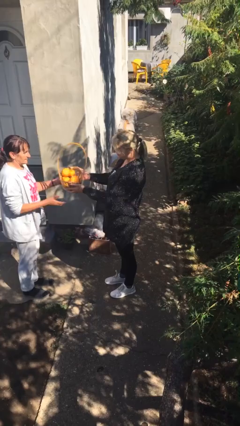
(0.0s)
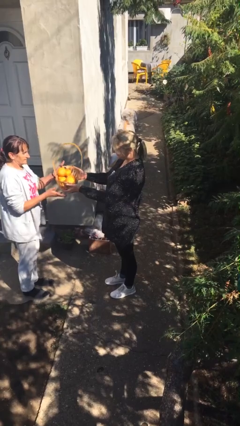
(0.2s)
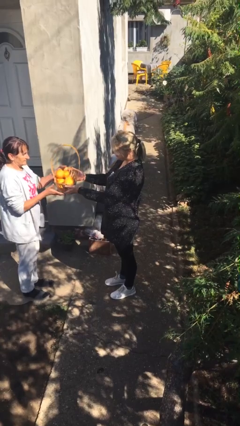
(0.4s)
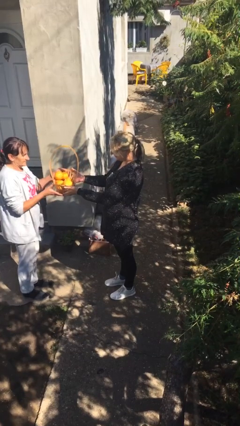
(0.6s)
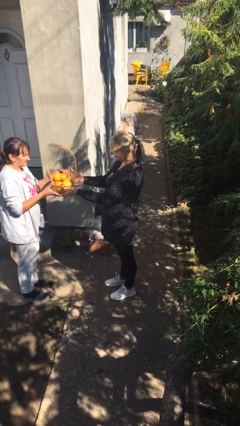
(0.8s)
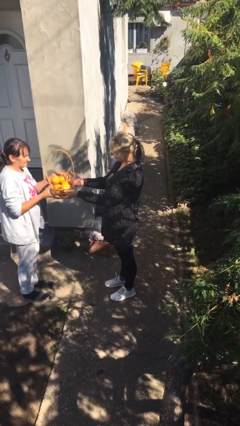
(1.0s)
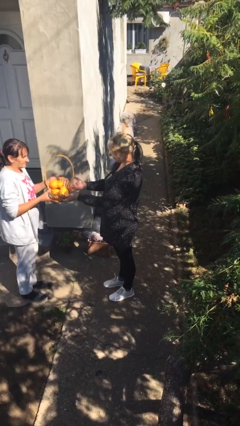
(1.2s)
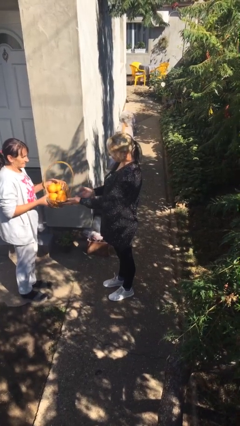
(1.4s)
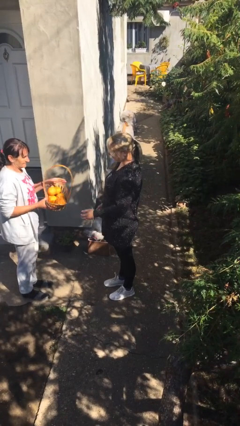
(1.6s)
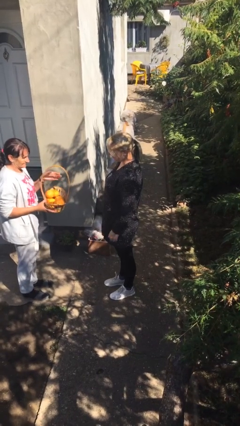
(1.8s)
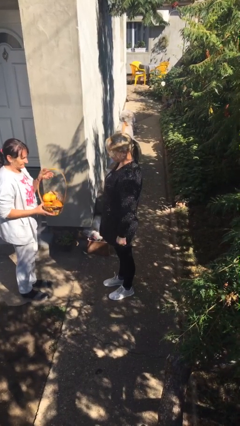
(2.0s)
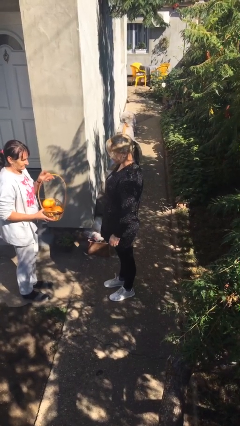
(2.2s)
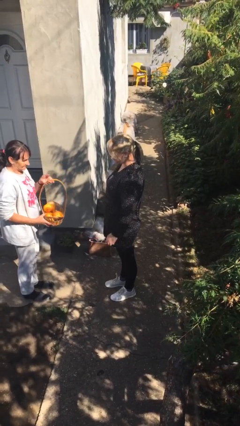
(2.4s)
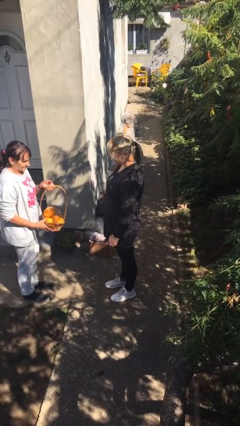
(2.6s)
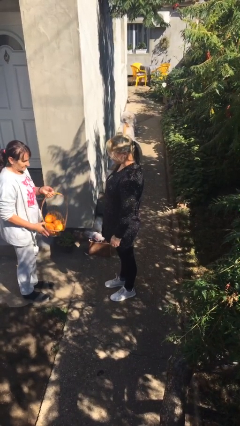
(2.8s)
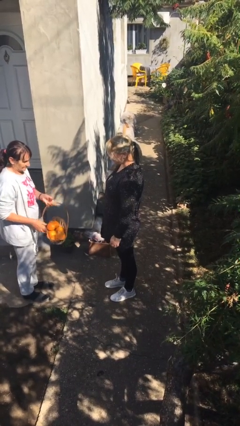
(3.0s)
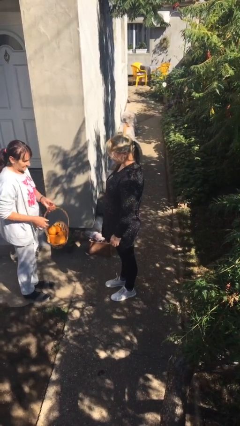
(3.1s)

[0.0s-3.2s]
person transfers object to person

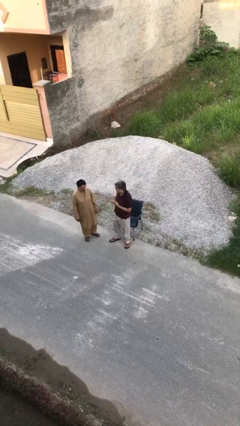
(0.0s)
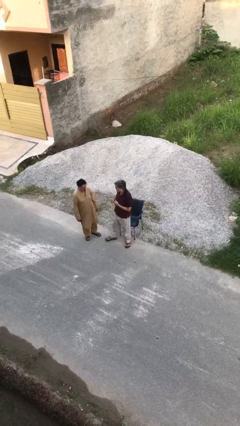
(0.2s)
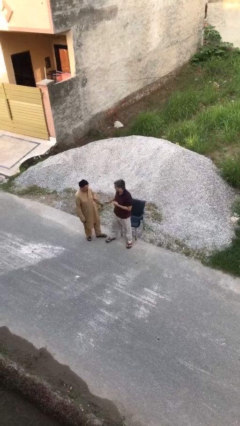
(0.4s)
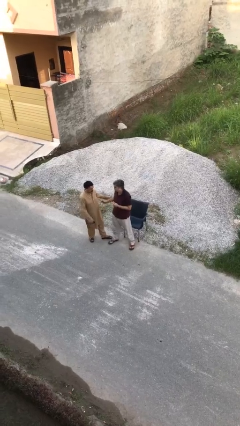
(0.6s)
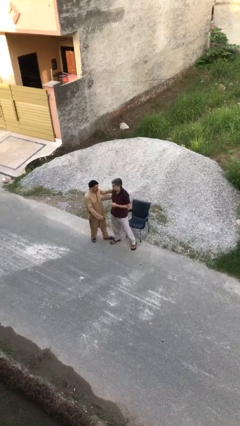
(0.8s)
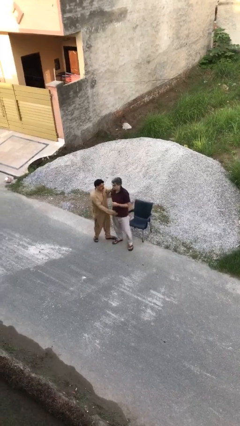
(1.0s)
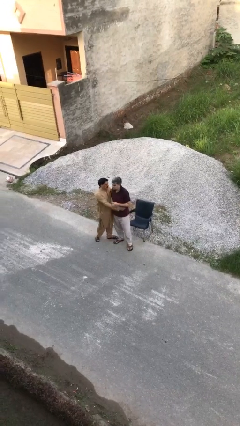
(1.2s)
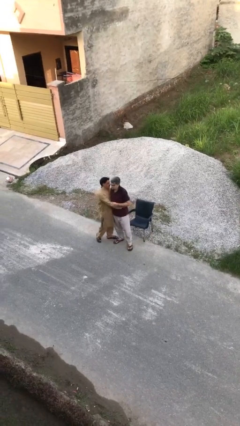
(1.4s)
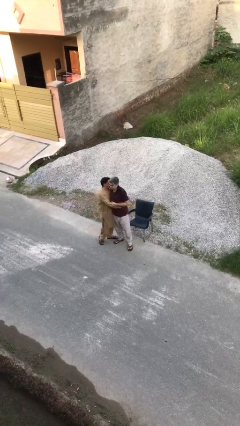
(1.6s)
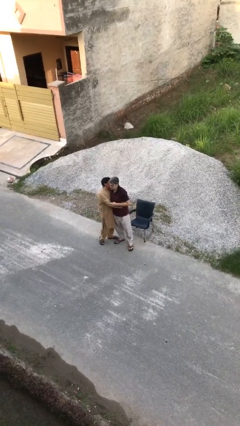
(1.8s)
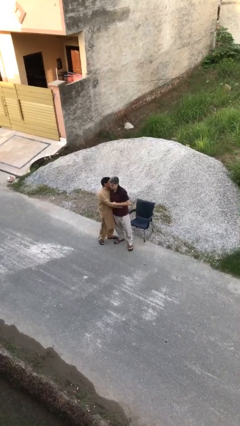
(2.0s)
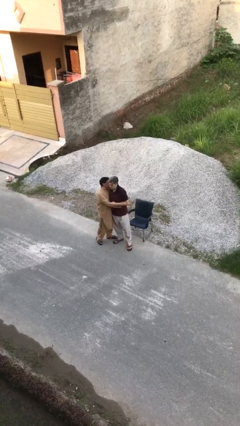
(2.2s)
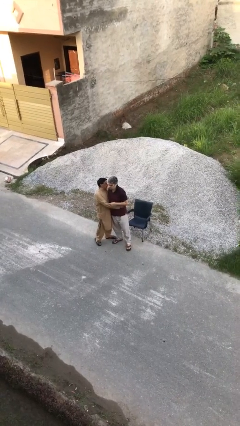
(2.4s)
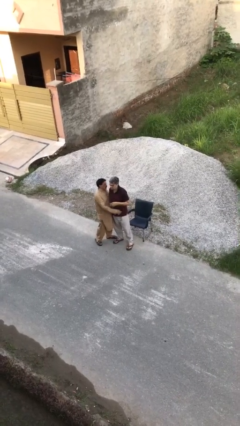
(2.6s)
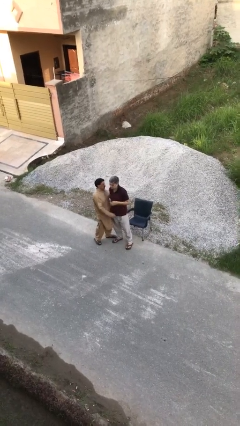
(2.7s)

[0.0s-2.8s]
person embraces person

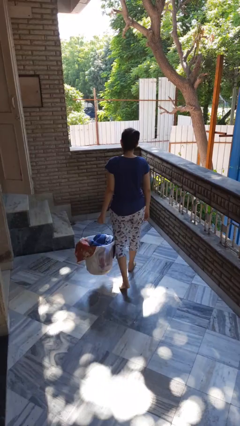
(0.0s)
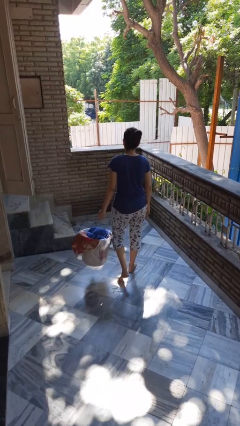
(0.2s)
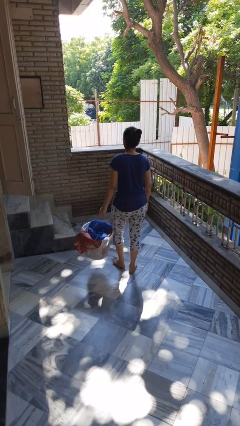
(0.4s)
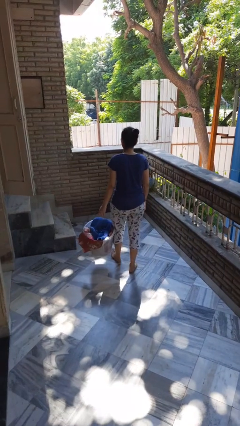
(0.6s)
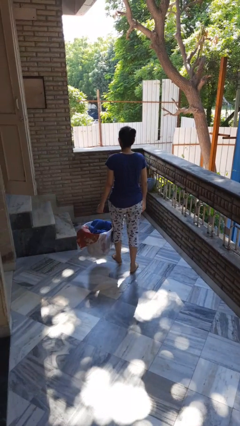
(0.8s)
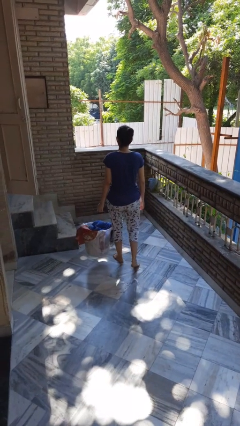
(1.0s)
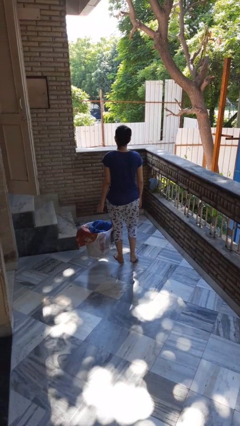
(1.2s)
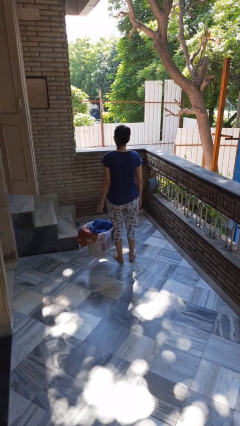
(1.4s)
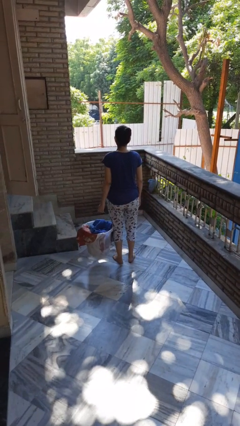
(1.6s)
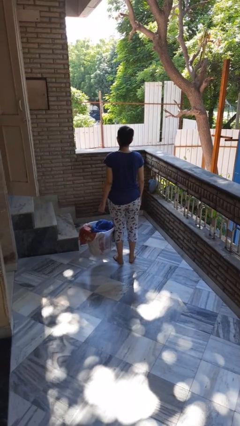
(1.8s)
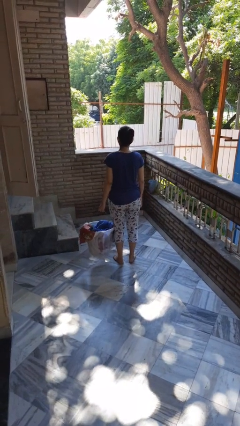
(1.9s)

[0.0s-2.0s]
person carries laundry basket

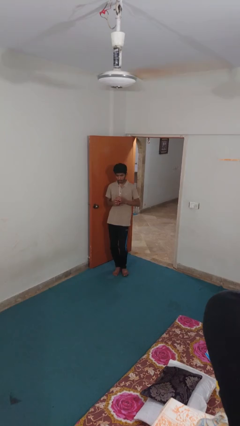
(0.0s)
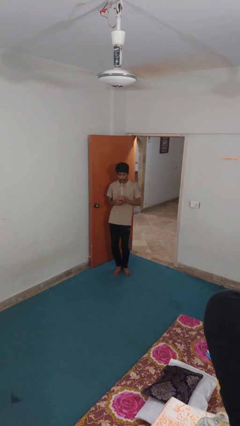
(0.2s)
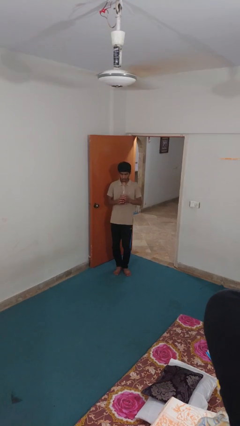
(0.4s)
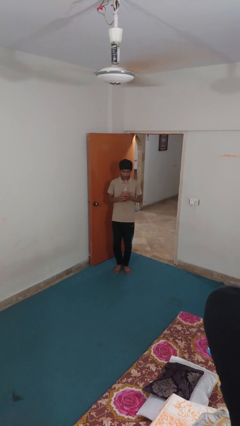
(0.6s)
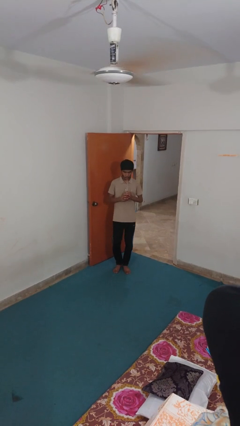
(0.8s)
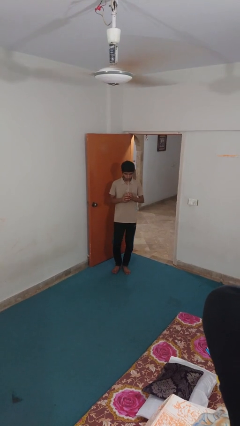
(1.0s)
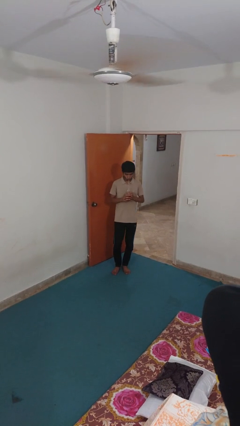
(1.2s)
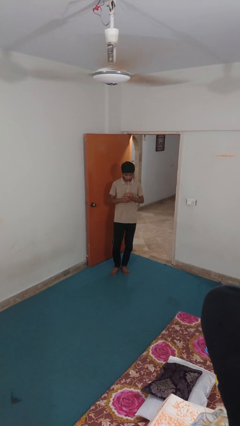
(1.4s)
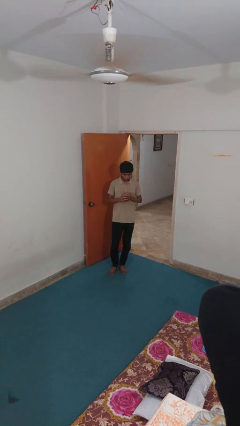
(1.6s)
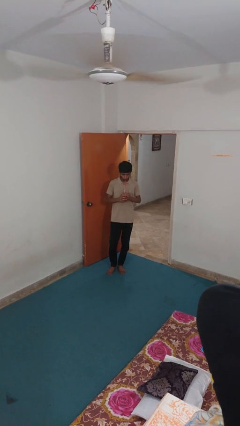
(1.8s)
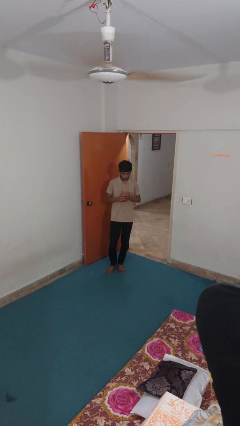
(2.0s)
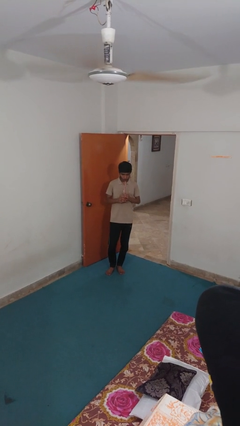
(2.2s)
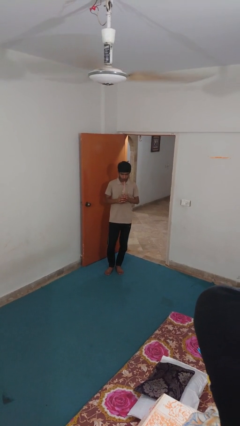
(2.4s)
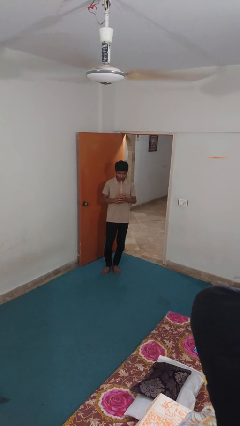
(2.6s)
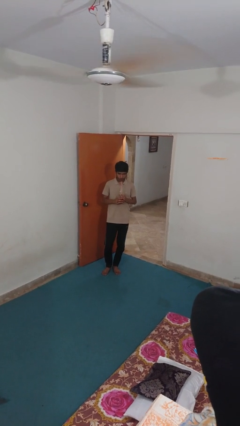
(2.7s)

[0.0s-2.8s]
person drinks from straw

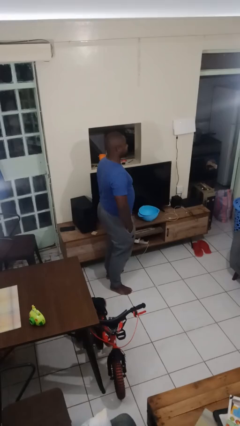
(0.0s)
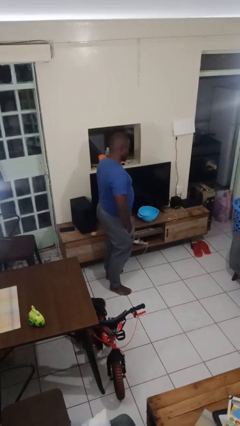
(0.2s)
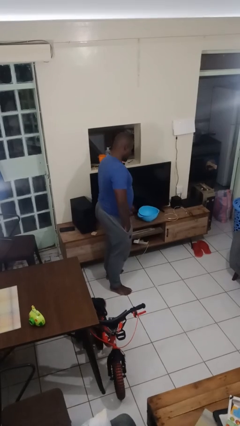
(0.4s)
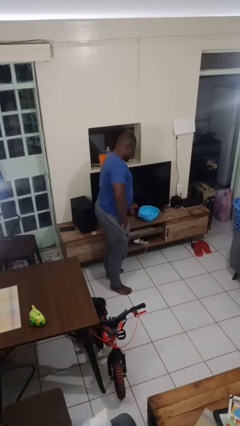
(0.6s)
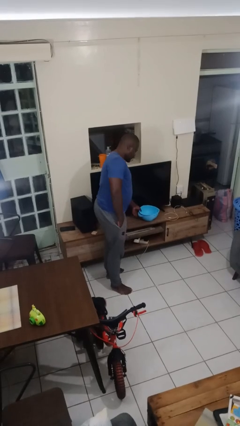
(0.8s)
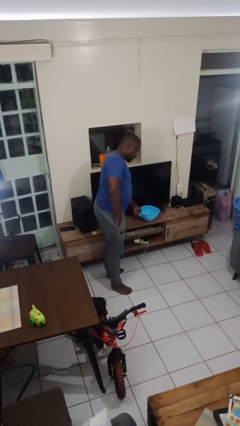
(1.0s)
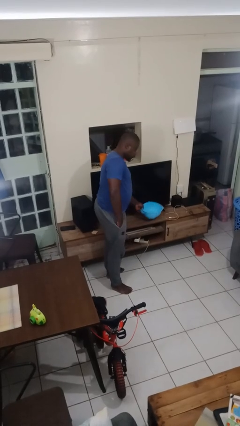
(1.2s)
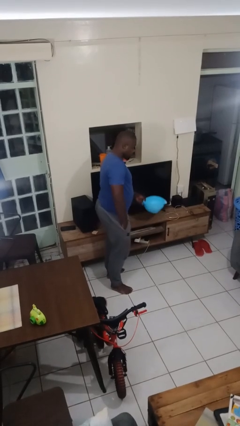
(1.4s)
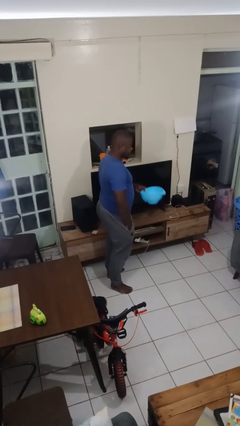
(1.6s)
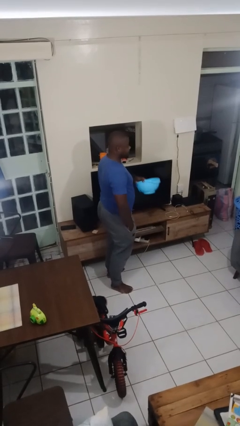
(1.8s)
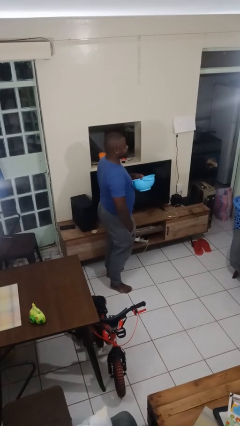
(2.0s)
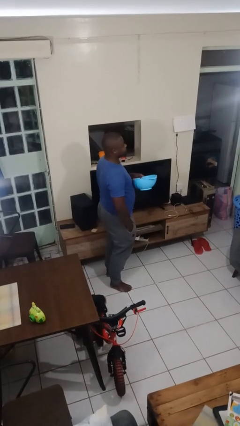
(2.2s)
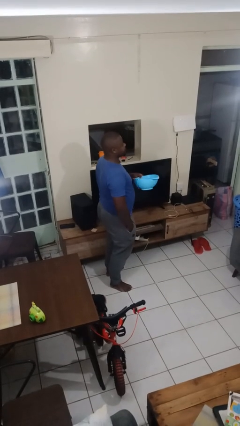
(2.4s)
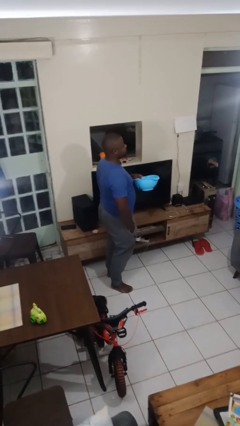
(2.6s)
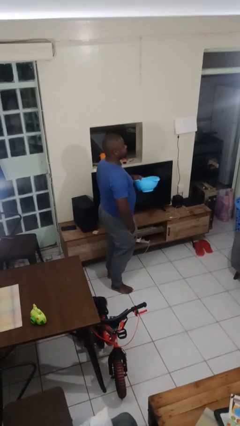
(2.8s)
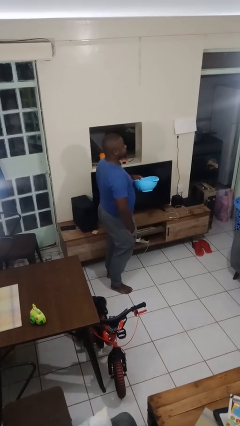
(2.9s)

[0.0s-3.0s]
person picks up object from countertop

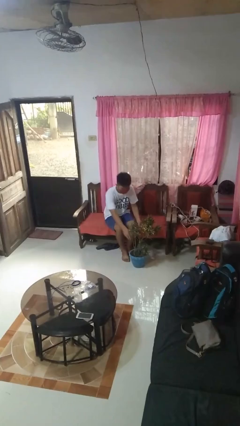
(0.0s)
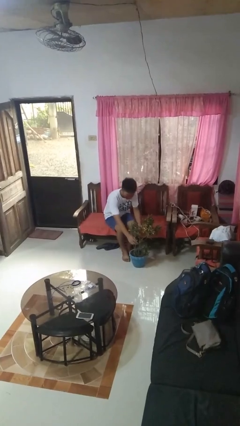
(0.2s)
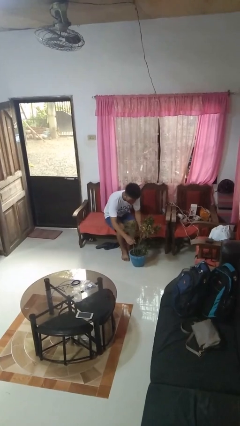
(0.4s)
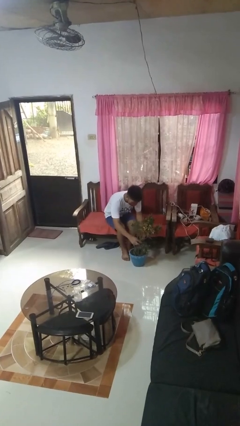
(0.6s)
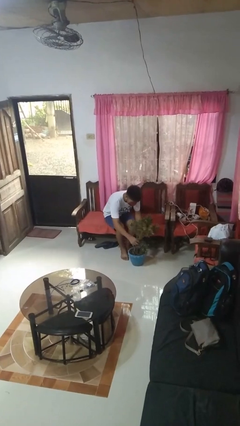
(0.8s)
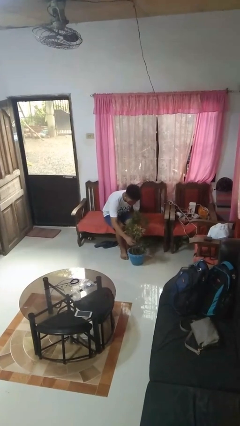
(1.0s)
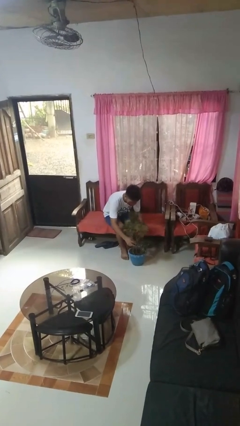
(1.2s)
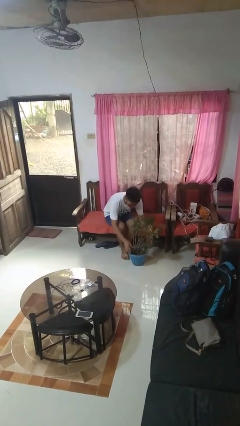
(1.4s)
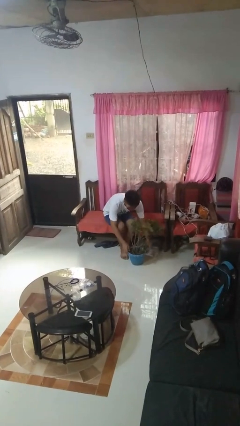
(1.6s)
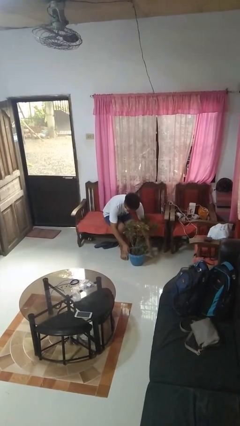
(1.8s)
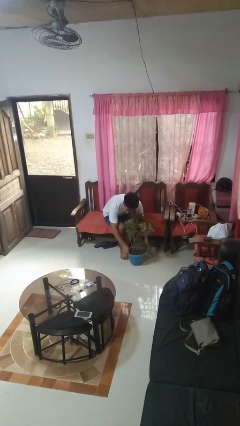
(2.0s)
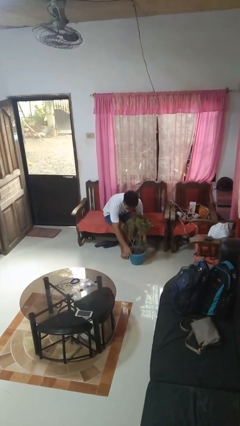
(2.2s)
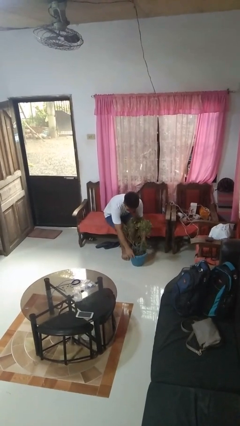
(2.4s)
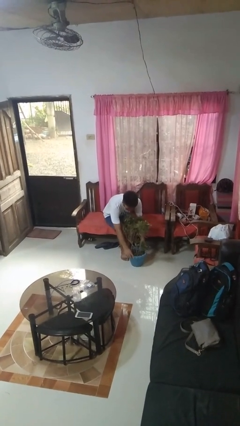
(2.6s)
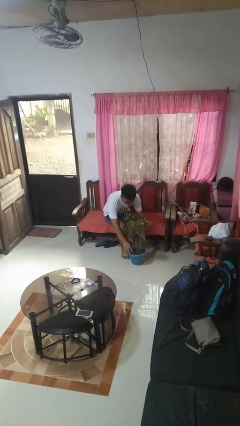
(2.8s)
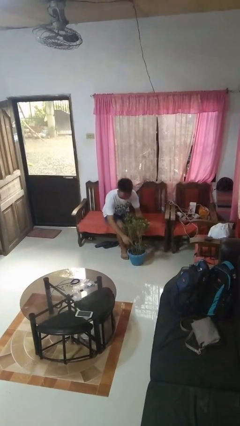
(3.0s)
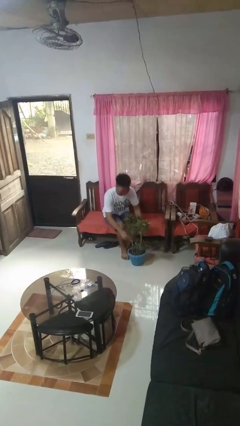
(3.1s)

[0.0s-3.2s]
person arranges flowers in vase
